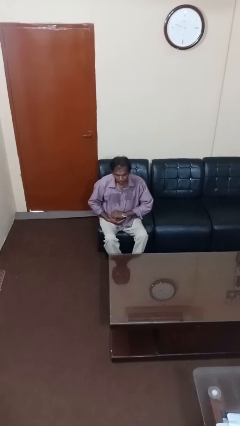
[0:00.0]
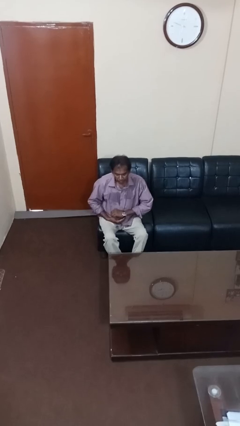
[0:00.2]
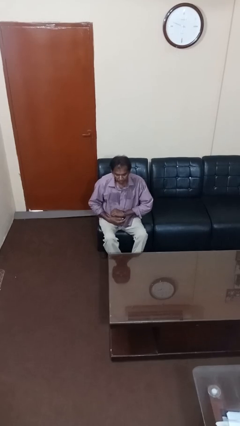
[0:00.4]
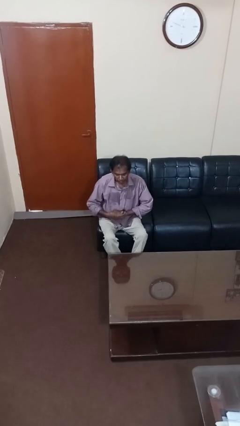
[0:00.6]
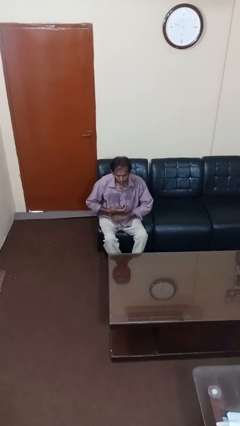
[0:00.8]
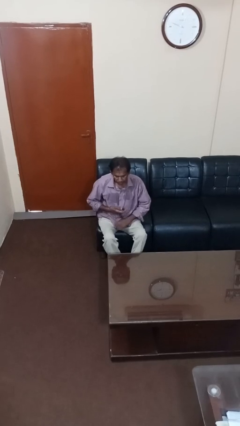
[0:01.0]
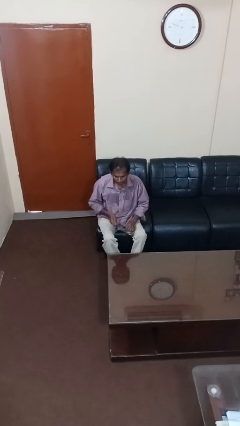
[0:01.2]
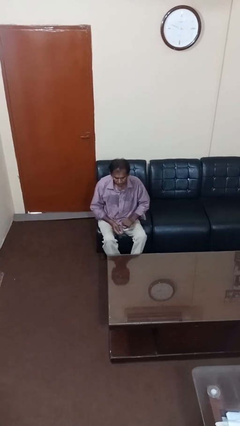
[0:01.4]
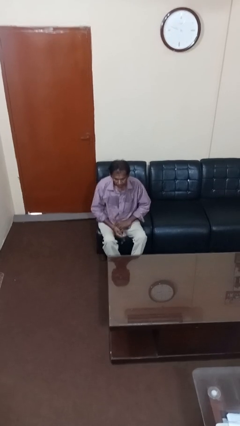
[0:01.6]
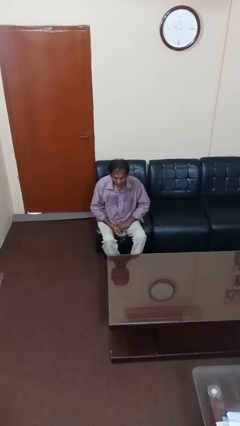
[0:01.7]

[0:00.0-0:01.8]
person takes off wristwatch

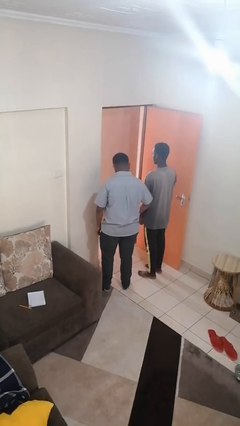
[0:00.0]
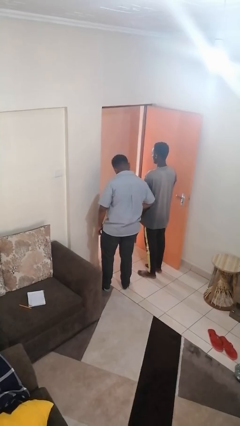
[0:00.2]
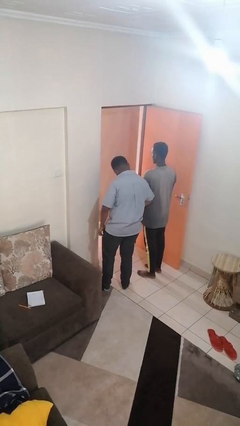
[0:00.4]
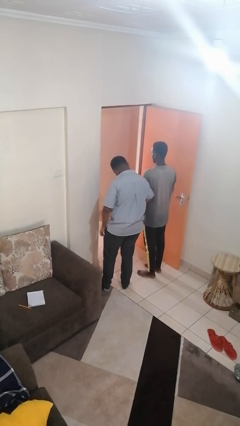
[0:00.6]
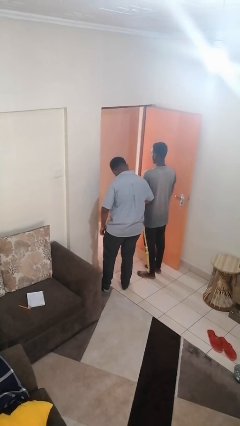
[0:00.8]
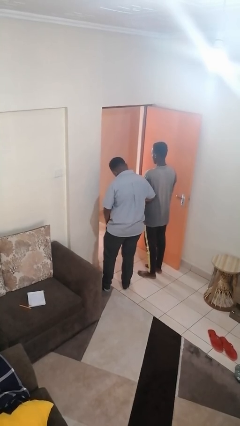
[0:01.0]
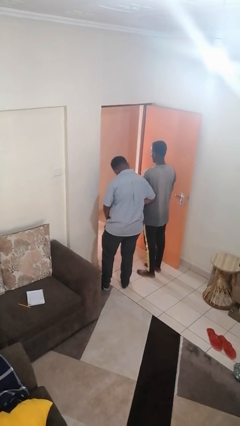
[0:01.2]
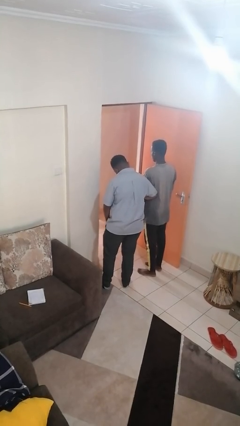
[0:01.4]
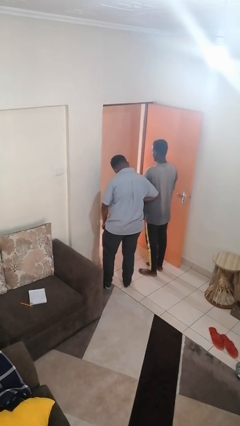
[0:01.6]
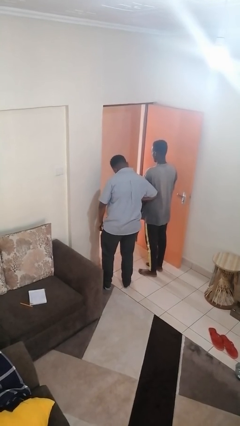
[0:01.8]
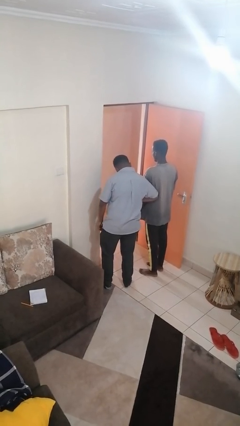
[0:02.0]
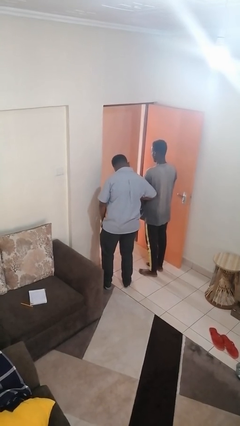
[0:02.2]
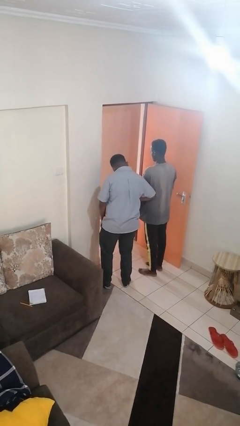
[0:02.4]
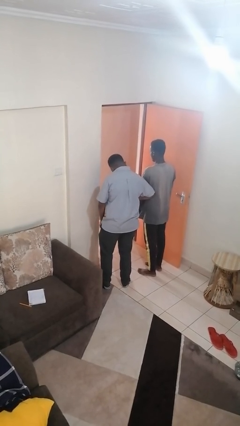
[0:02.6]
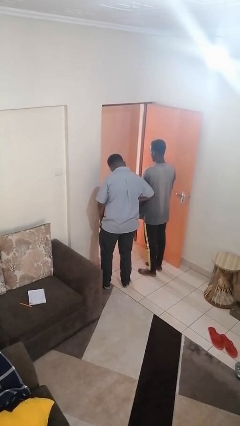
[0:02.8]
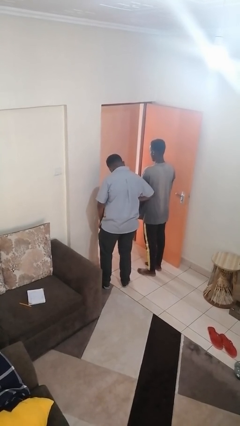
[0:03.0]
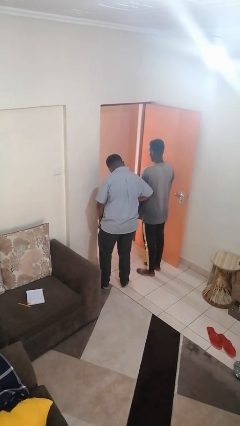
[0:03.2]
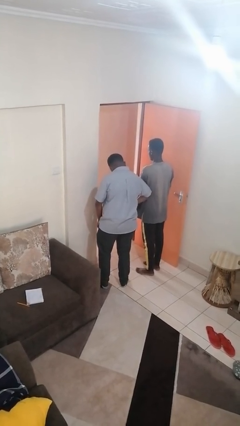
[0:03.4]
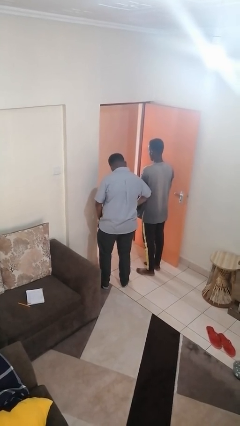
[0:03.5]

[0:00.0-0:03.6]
person nudges person with elbow

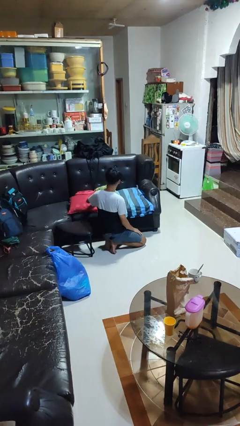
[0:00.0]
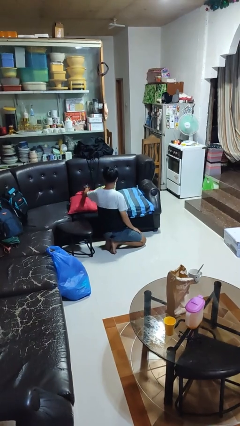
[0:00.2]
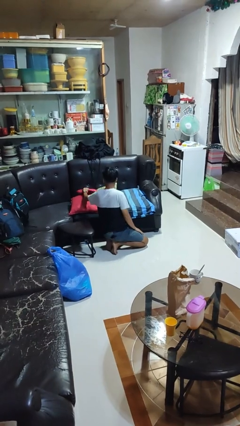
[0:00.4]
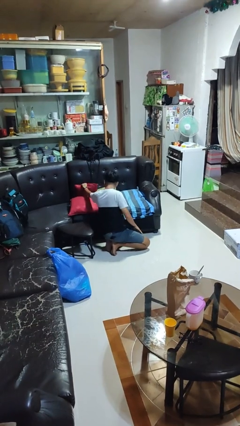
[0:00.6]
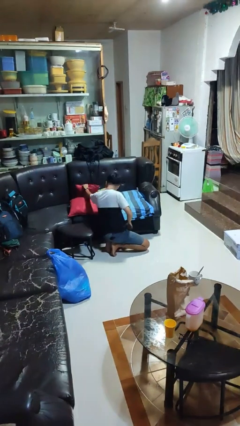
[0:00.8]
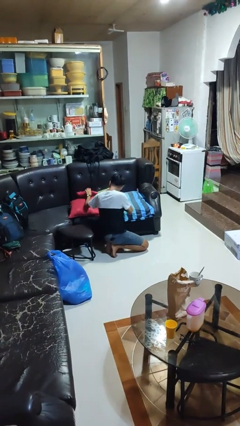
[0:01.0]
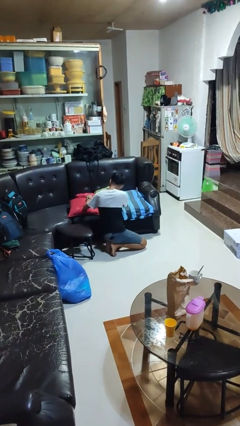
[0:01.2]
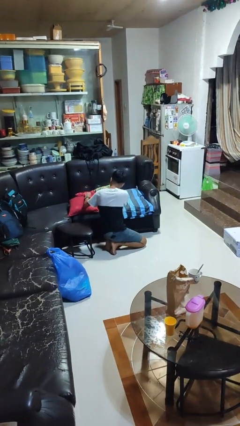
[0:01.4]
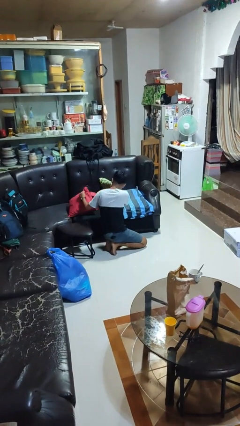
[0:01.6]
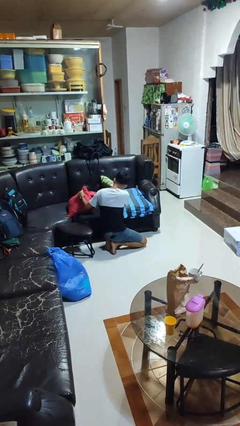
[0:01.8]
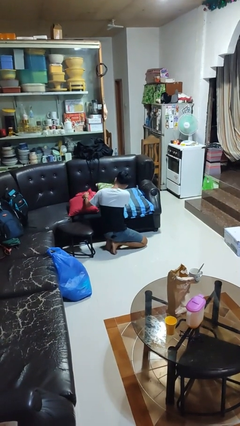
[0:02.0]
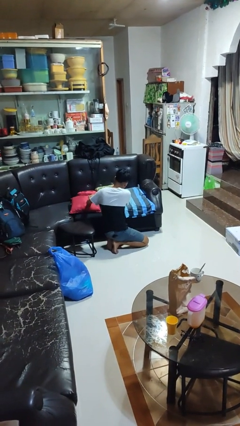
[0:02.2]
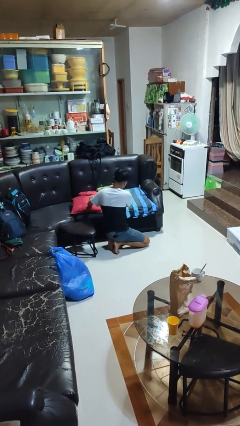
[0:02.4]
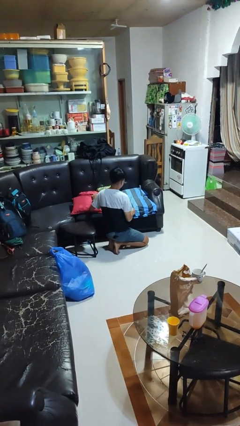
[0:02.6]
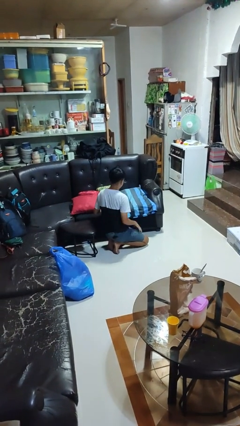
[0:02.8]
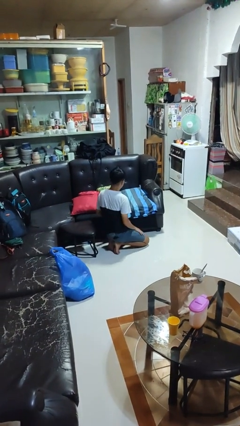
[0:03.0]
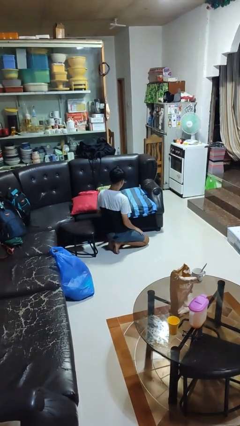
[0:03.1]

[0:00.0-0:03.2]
person searches in couch

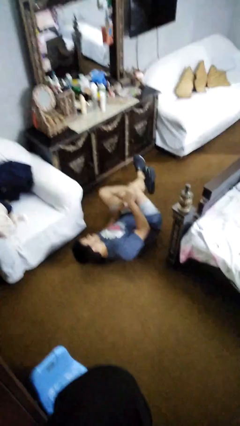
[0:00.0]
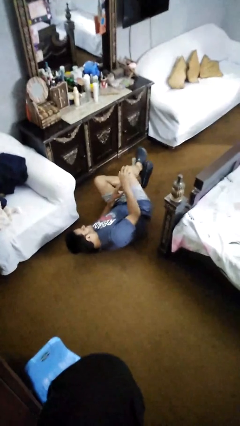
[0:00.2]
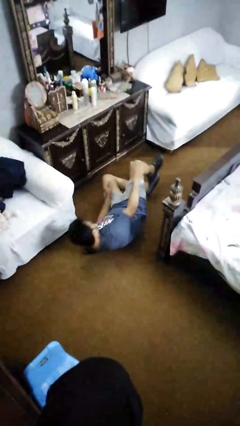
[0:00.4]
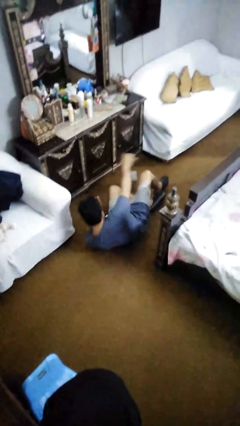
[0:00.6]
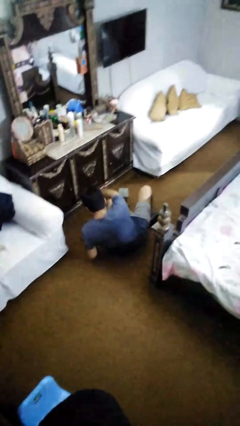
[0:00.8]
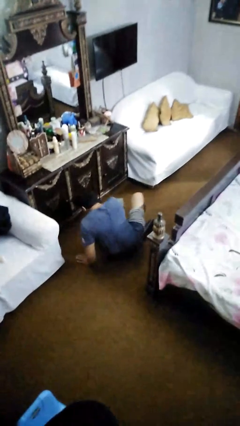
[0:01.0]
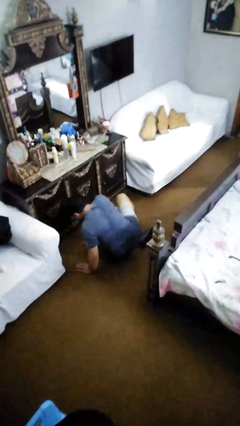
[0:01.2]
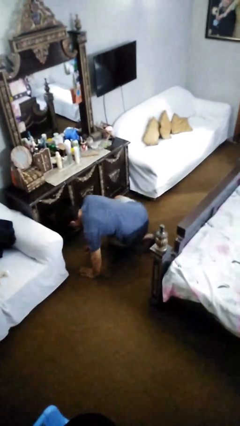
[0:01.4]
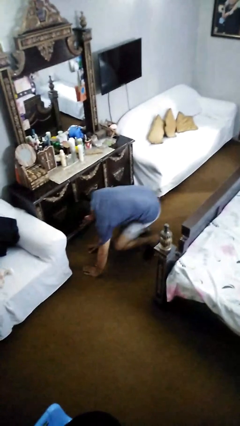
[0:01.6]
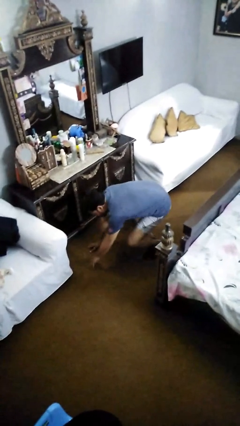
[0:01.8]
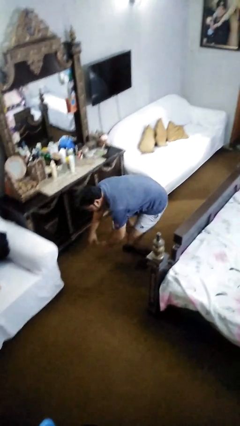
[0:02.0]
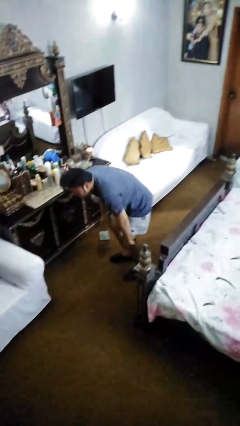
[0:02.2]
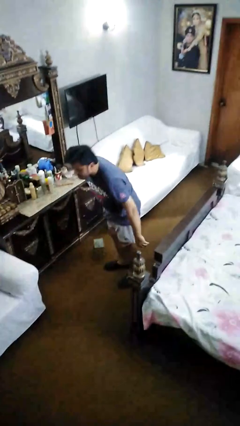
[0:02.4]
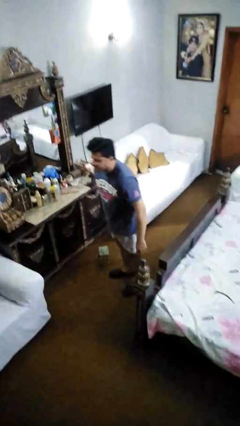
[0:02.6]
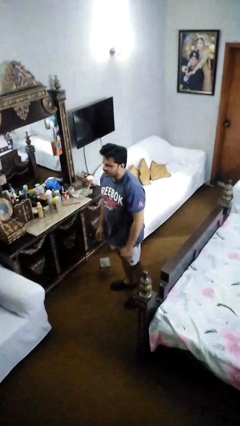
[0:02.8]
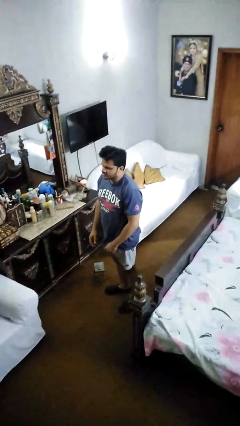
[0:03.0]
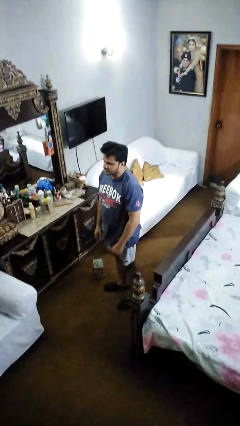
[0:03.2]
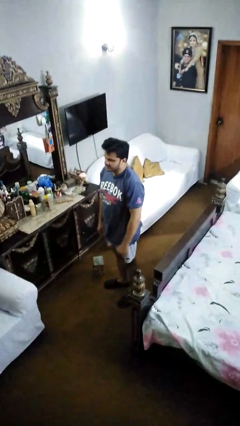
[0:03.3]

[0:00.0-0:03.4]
person stands up from floor

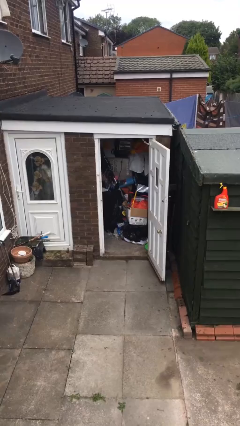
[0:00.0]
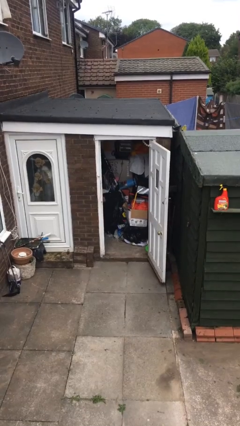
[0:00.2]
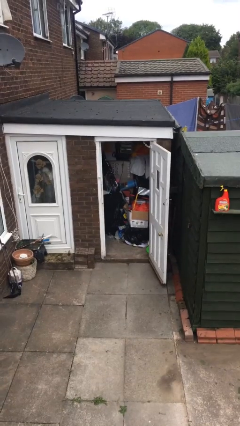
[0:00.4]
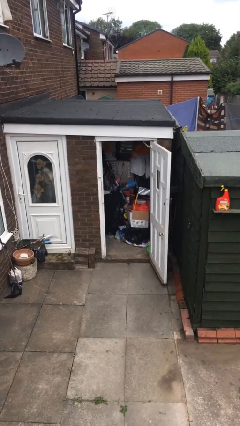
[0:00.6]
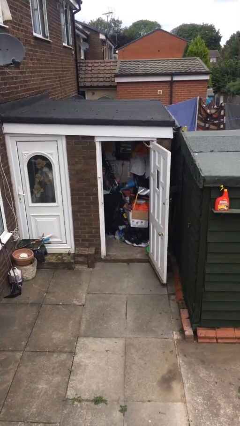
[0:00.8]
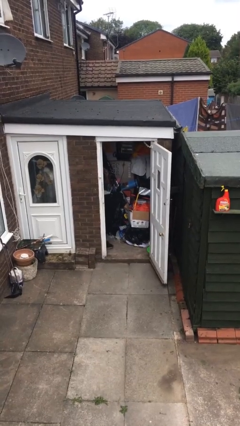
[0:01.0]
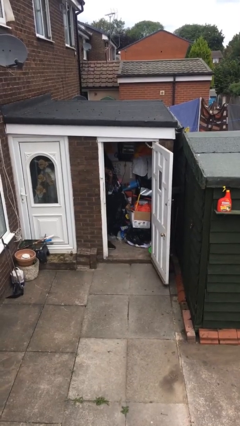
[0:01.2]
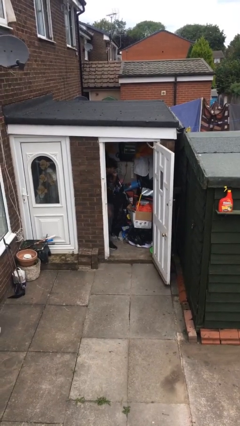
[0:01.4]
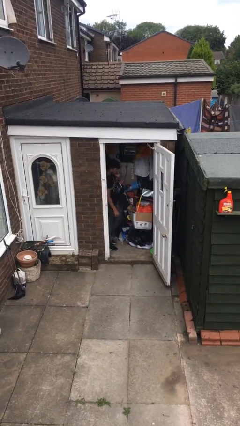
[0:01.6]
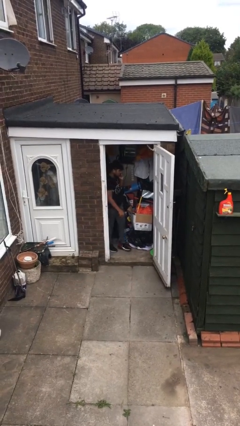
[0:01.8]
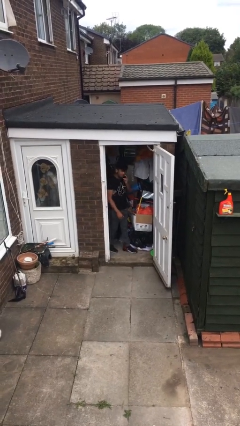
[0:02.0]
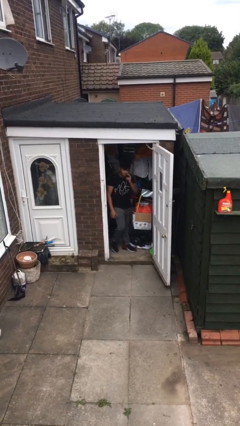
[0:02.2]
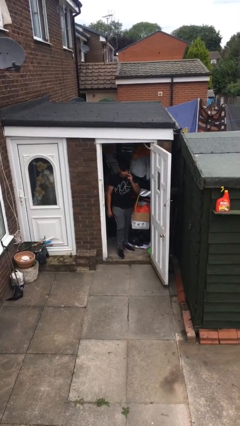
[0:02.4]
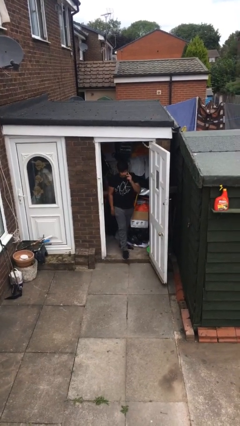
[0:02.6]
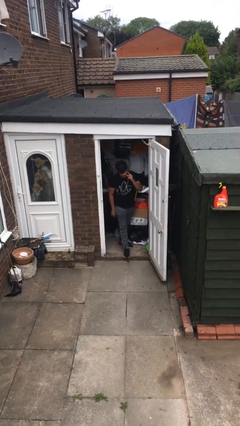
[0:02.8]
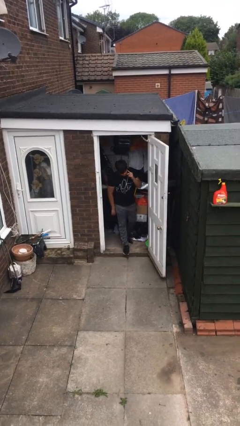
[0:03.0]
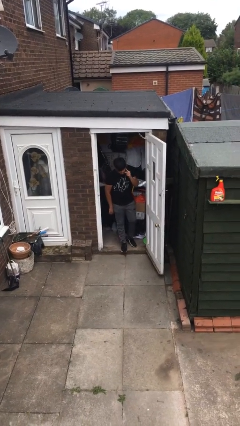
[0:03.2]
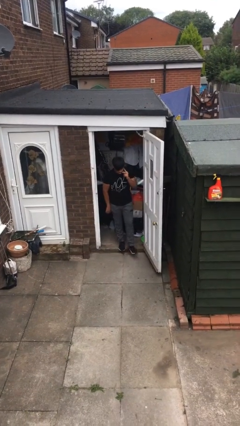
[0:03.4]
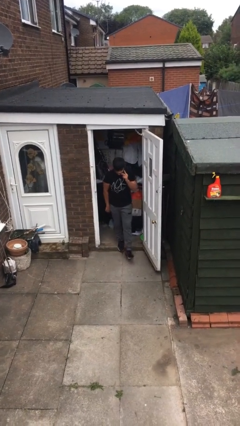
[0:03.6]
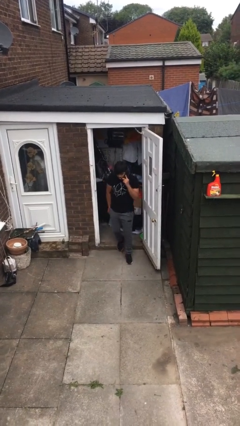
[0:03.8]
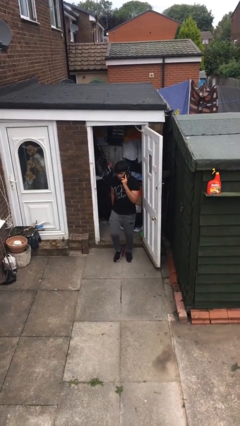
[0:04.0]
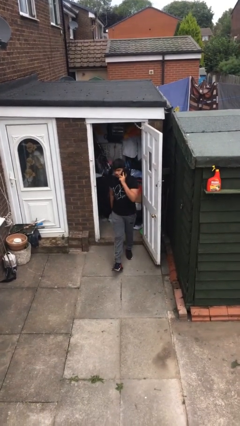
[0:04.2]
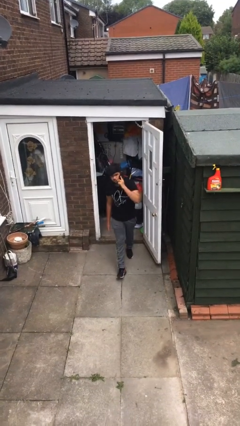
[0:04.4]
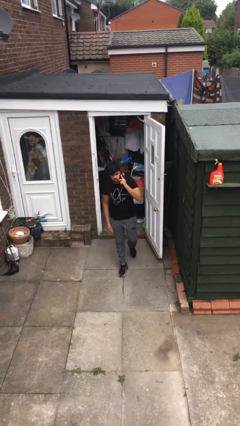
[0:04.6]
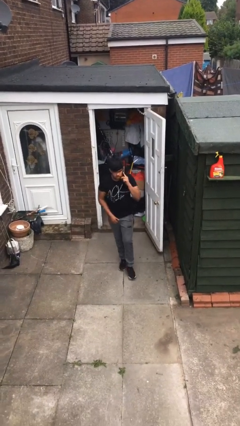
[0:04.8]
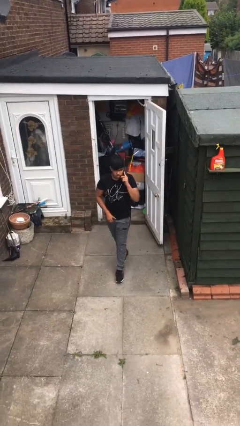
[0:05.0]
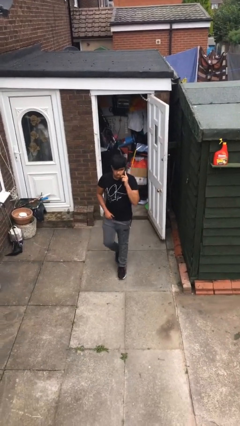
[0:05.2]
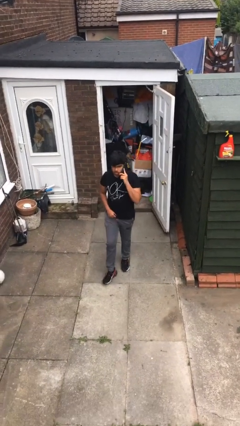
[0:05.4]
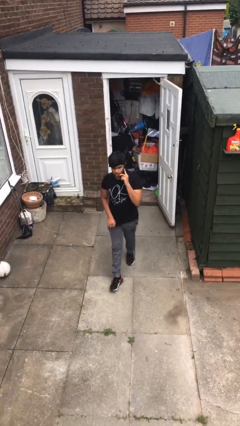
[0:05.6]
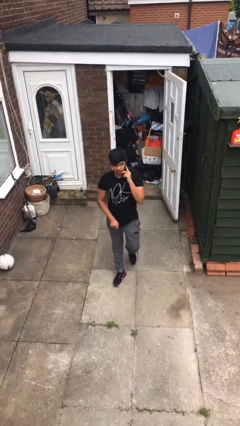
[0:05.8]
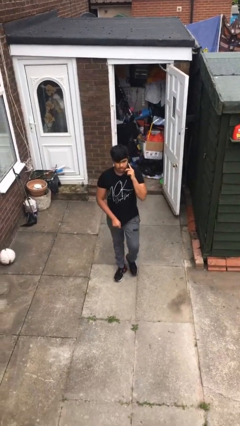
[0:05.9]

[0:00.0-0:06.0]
person enters scene through structure
